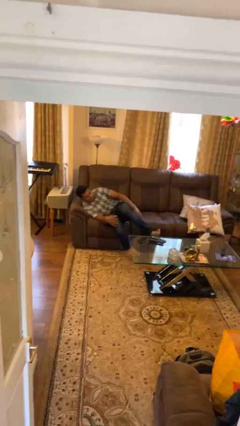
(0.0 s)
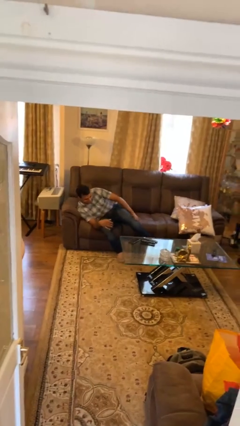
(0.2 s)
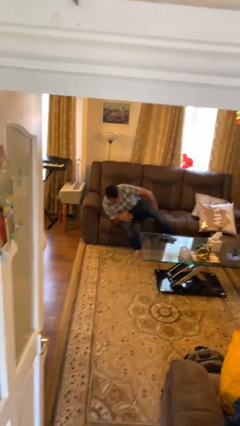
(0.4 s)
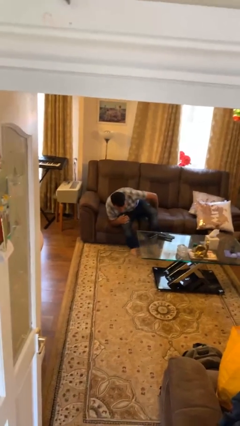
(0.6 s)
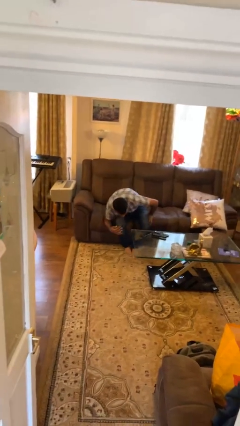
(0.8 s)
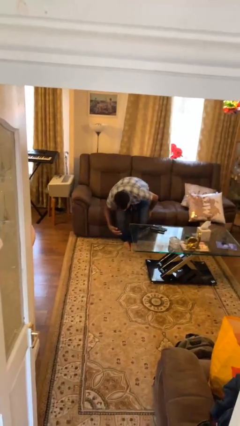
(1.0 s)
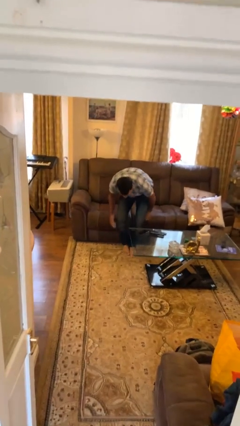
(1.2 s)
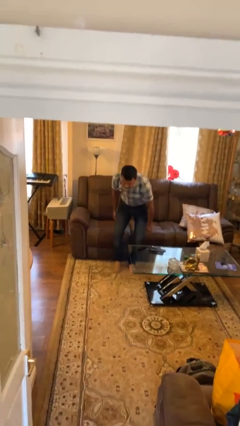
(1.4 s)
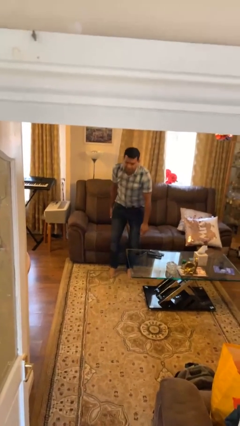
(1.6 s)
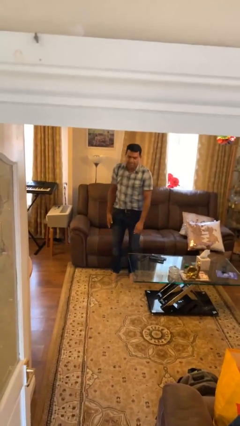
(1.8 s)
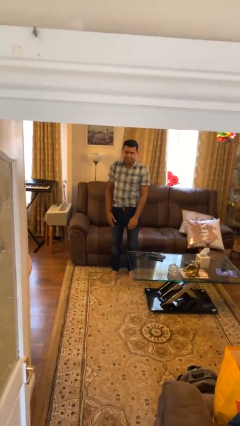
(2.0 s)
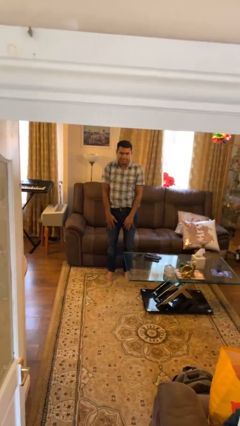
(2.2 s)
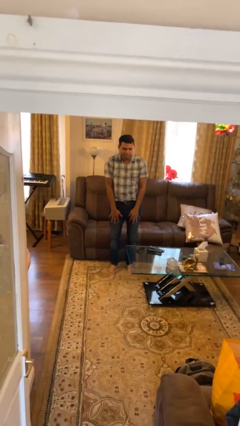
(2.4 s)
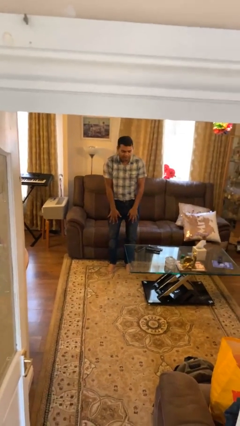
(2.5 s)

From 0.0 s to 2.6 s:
person stands up

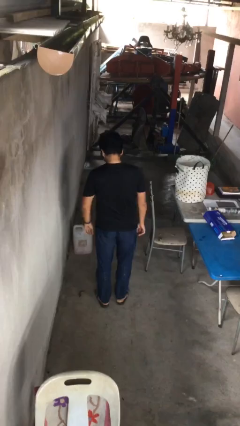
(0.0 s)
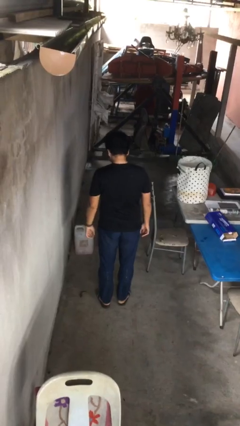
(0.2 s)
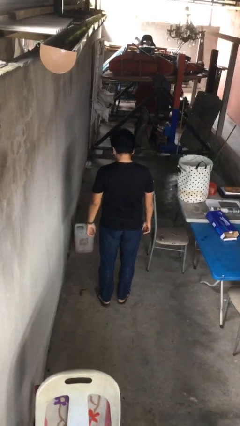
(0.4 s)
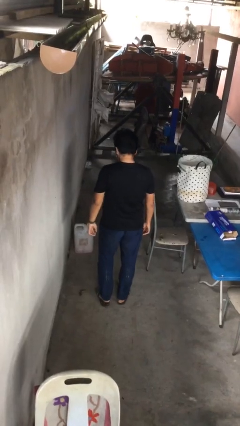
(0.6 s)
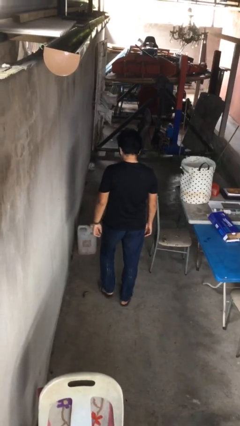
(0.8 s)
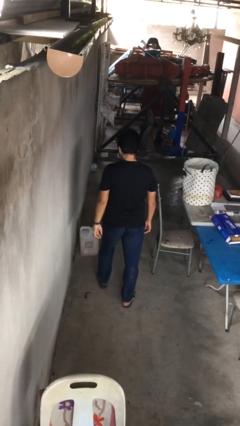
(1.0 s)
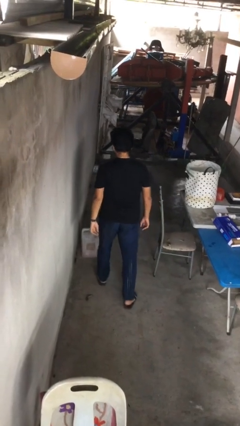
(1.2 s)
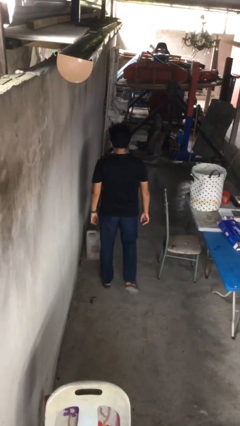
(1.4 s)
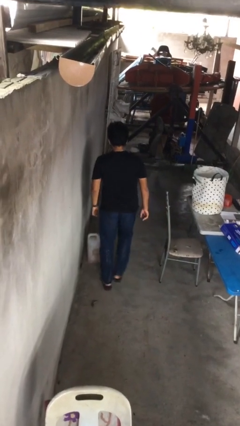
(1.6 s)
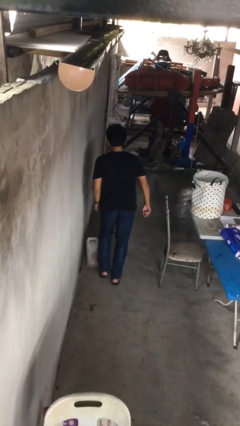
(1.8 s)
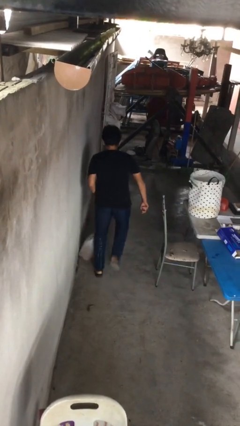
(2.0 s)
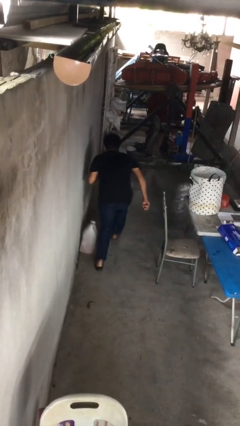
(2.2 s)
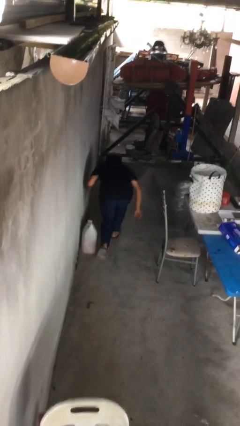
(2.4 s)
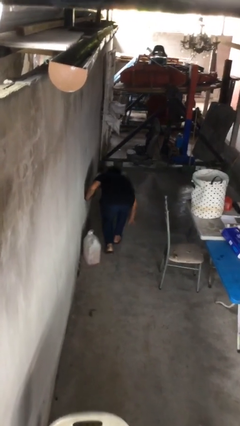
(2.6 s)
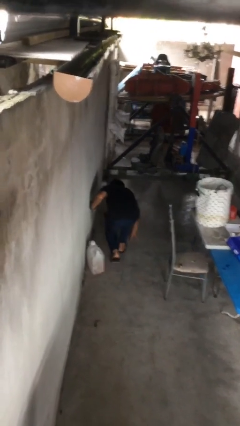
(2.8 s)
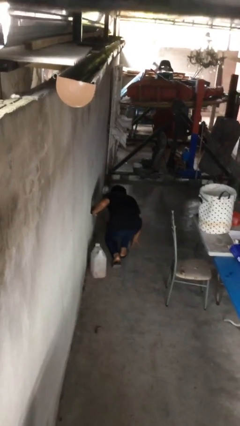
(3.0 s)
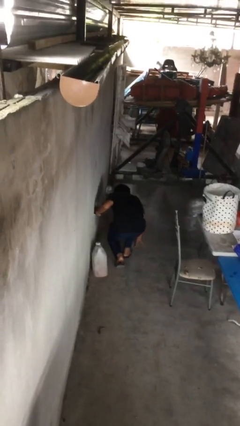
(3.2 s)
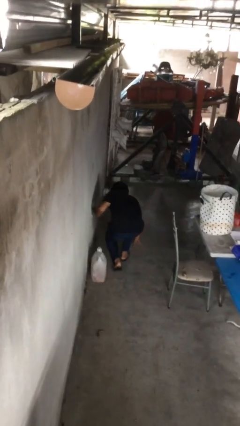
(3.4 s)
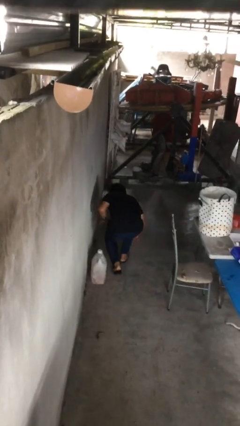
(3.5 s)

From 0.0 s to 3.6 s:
person trips on object on floor

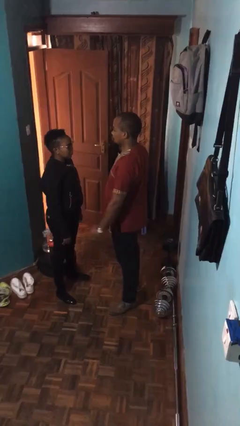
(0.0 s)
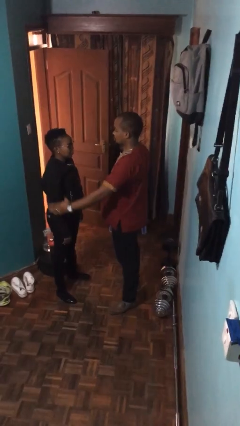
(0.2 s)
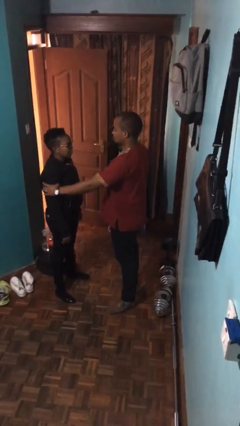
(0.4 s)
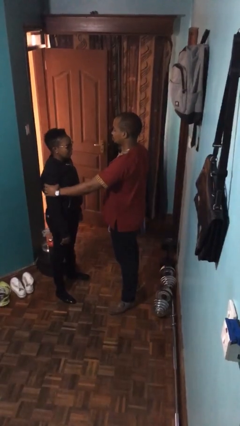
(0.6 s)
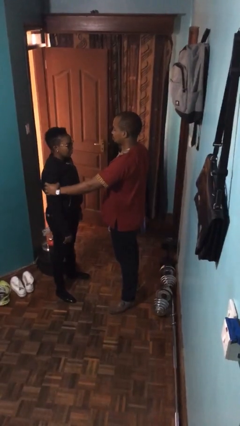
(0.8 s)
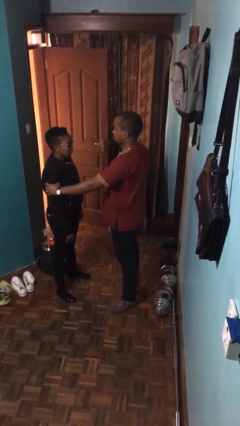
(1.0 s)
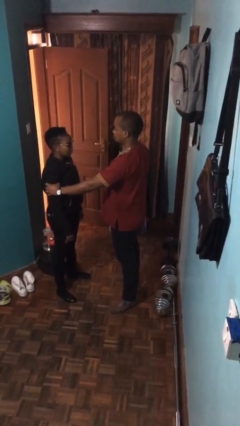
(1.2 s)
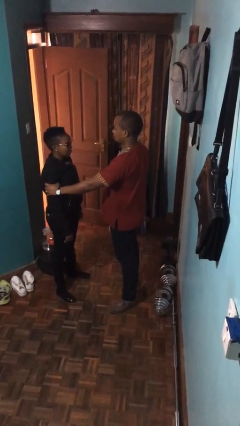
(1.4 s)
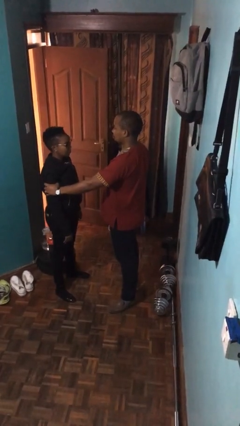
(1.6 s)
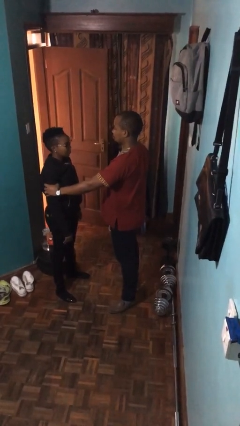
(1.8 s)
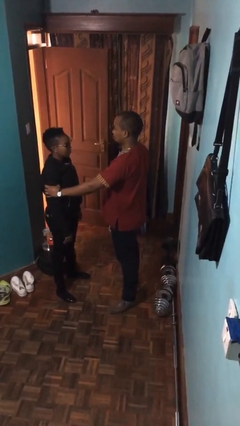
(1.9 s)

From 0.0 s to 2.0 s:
person grabs person by bicep

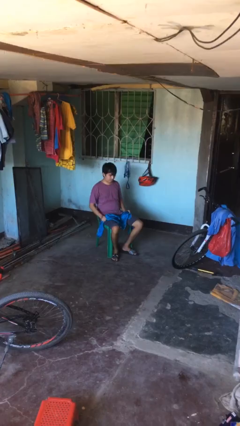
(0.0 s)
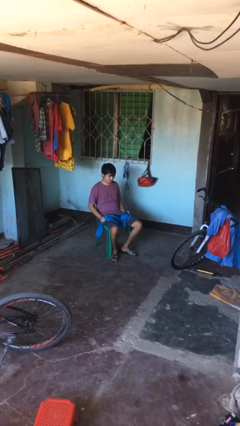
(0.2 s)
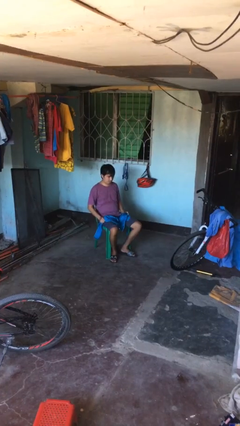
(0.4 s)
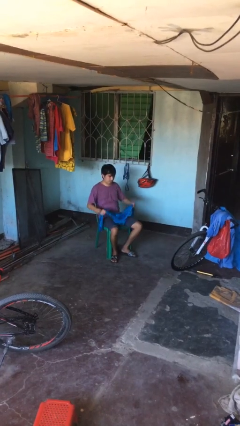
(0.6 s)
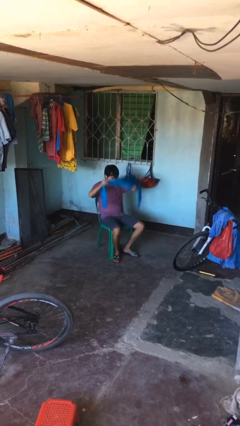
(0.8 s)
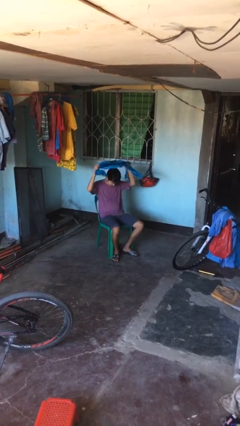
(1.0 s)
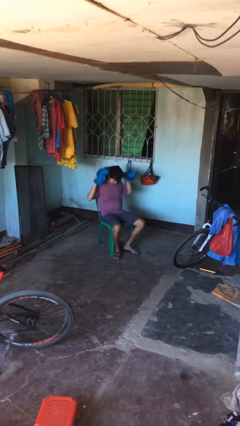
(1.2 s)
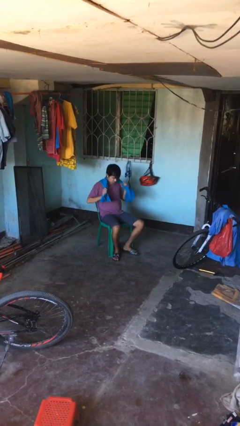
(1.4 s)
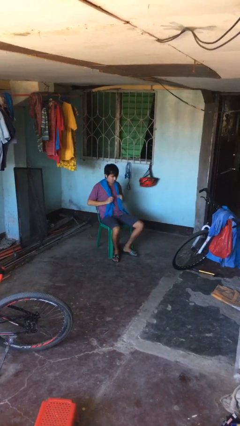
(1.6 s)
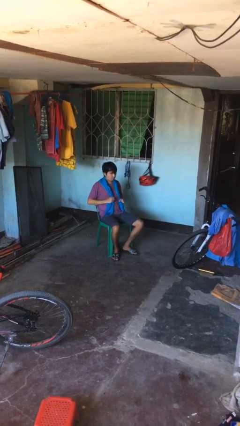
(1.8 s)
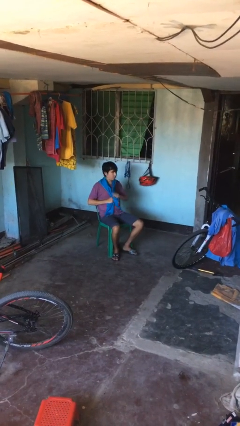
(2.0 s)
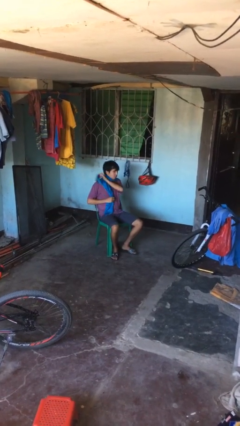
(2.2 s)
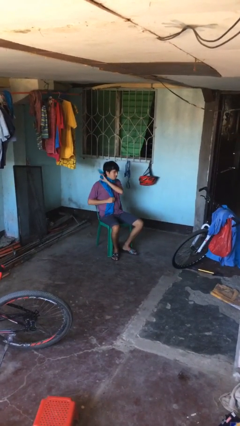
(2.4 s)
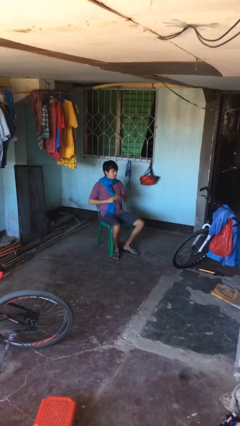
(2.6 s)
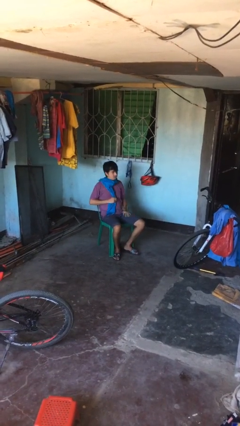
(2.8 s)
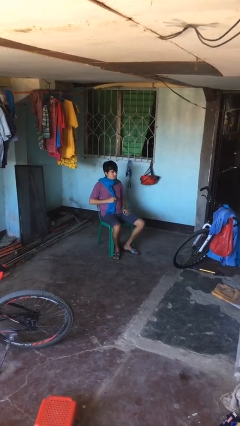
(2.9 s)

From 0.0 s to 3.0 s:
person puts on scarf

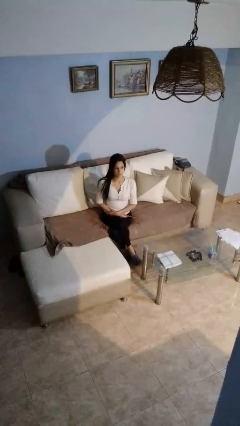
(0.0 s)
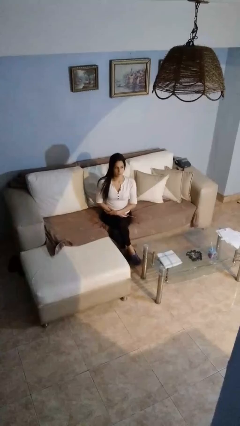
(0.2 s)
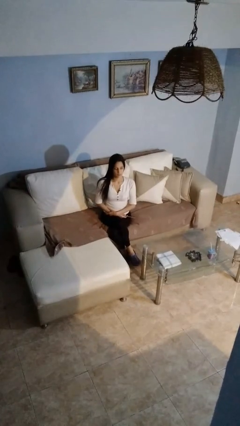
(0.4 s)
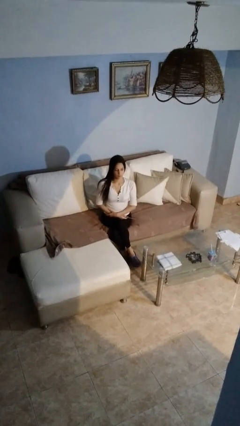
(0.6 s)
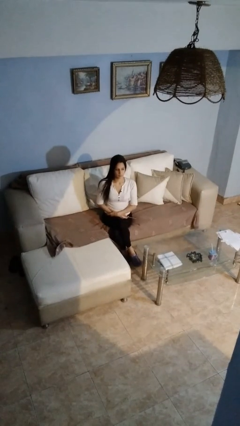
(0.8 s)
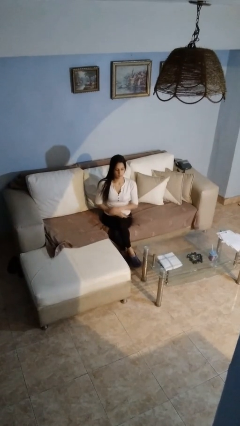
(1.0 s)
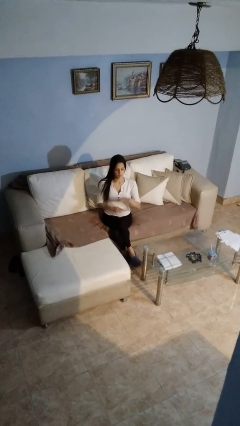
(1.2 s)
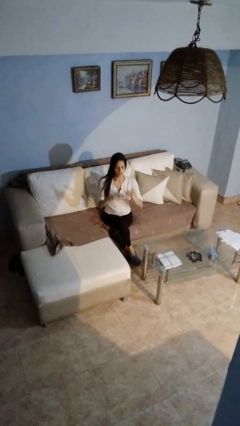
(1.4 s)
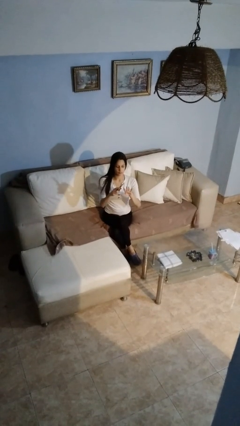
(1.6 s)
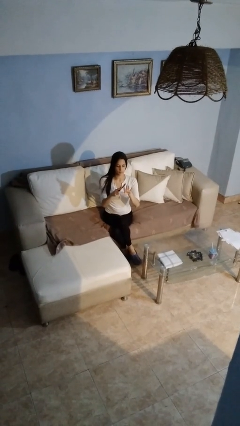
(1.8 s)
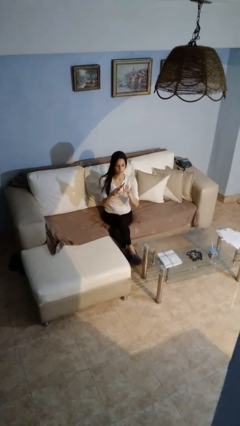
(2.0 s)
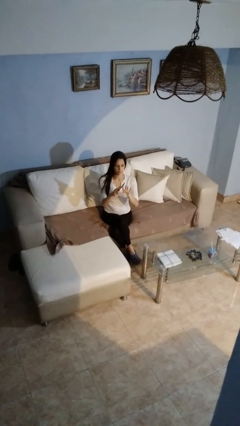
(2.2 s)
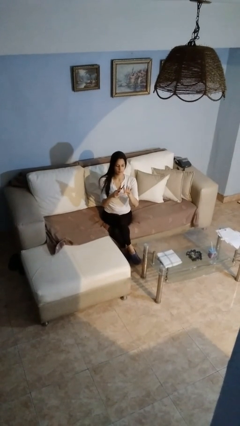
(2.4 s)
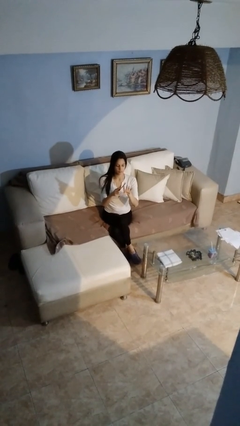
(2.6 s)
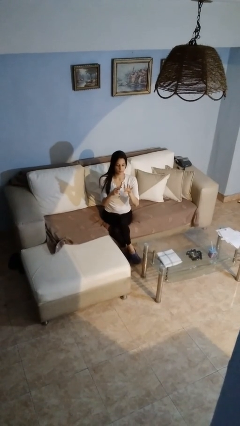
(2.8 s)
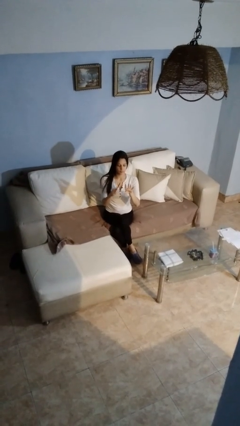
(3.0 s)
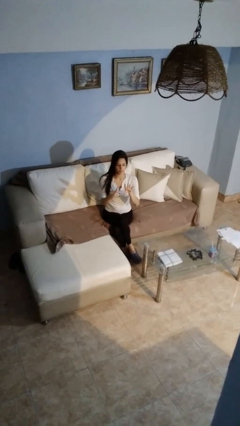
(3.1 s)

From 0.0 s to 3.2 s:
person files fingernails

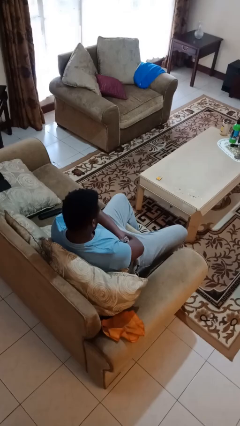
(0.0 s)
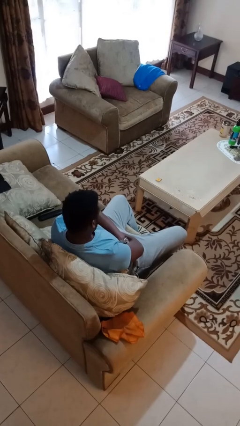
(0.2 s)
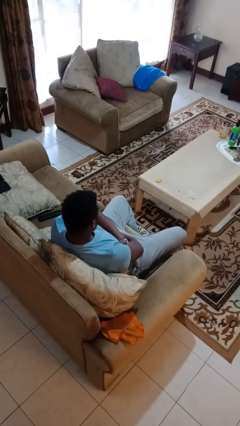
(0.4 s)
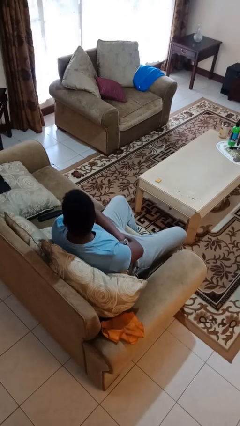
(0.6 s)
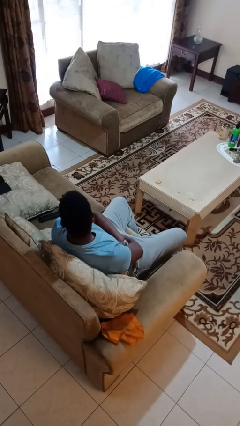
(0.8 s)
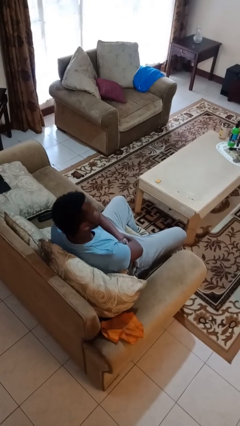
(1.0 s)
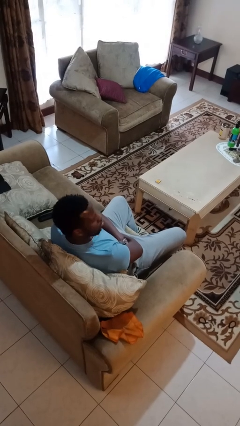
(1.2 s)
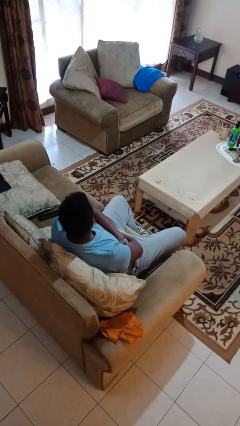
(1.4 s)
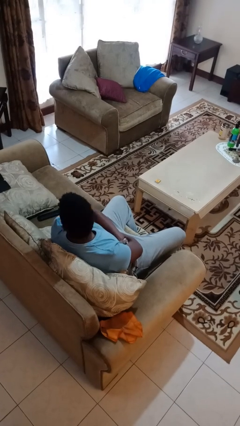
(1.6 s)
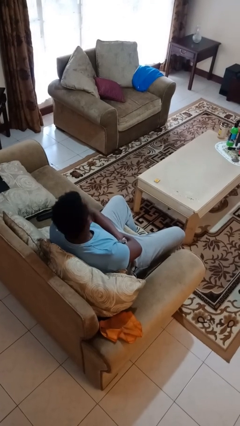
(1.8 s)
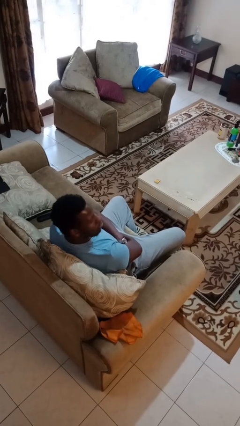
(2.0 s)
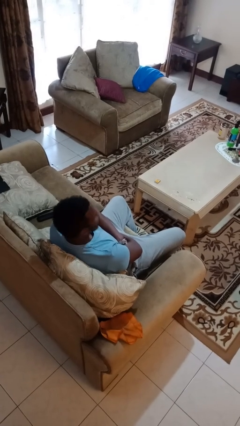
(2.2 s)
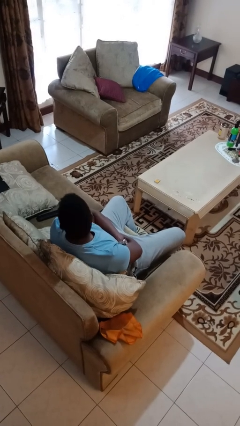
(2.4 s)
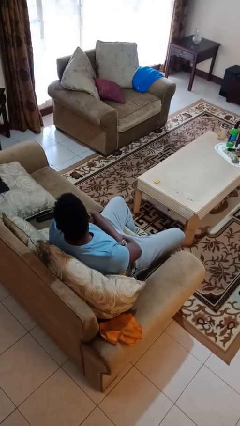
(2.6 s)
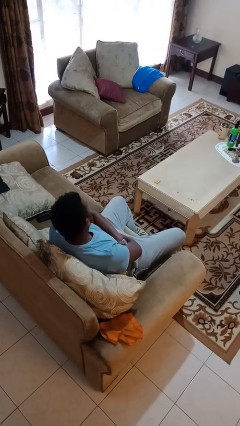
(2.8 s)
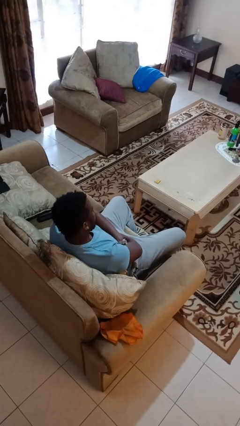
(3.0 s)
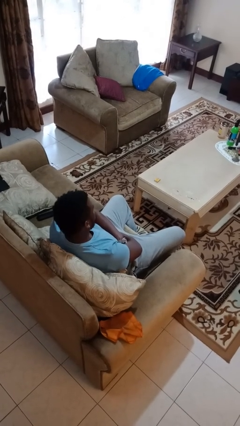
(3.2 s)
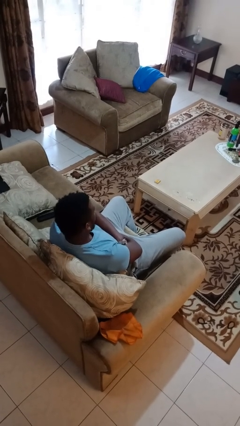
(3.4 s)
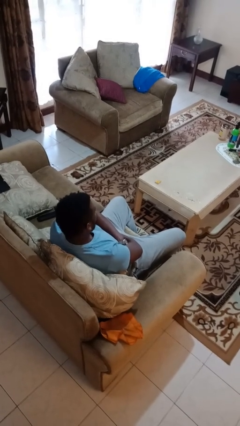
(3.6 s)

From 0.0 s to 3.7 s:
person shakes head
